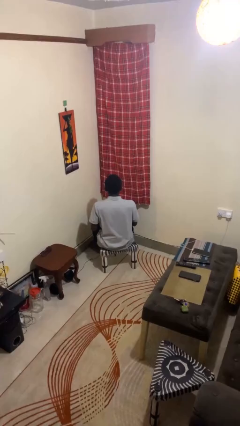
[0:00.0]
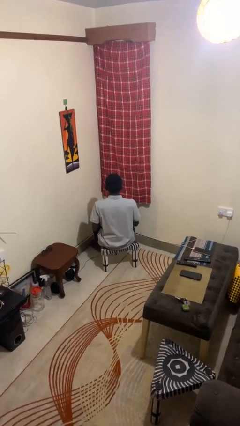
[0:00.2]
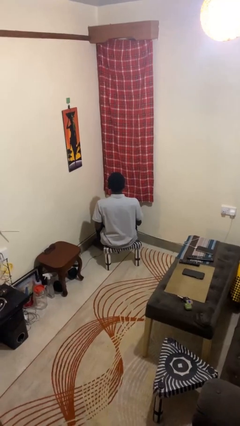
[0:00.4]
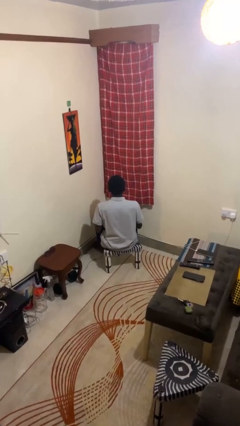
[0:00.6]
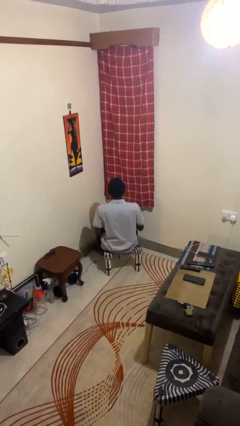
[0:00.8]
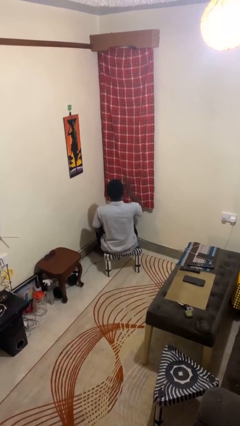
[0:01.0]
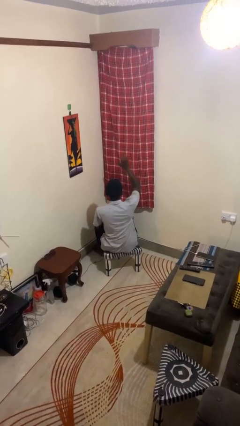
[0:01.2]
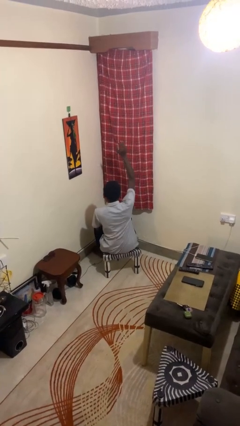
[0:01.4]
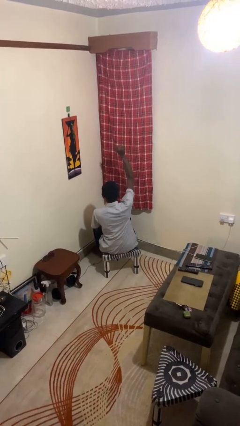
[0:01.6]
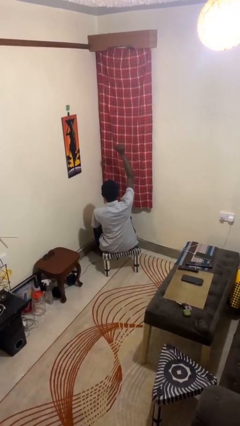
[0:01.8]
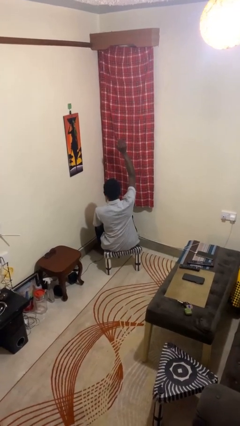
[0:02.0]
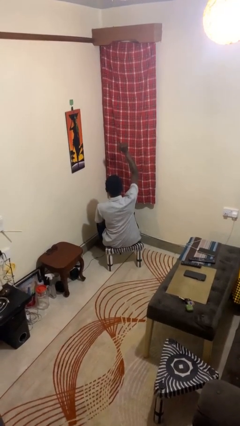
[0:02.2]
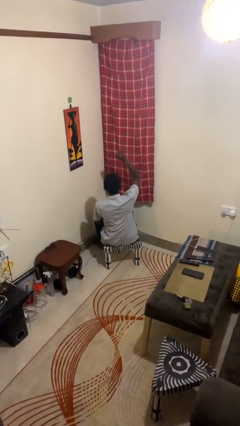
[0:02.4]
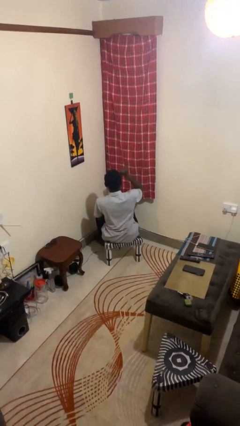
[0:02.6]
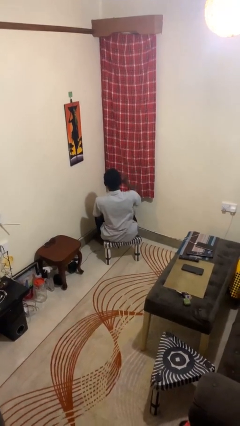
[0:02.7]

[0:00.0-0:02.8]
person gestures come here

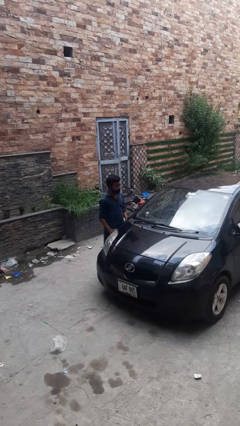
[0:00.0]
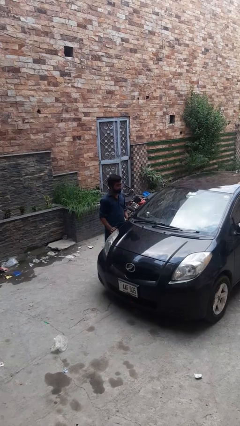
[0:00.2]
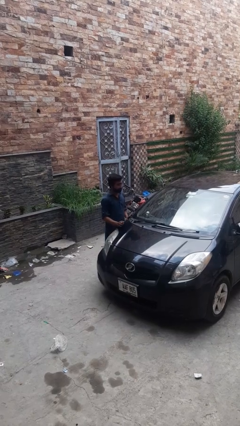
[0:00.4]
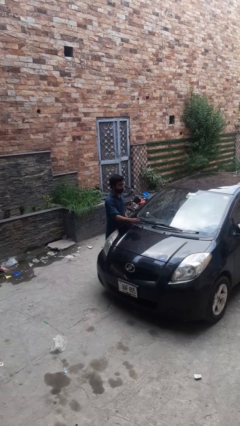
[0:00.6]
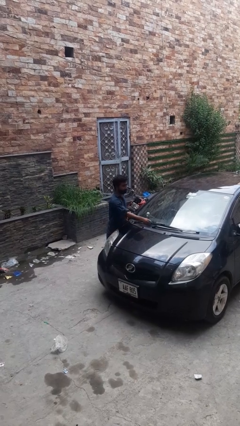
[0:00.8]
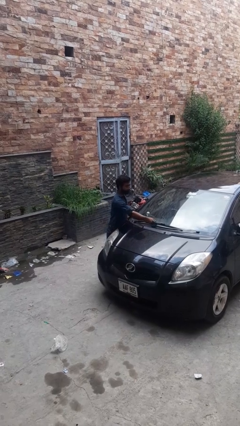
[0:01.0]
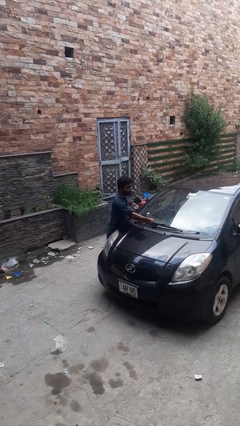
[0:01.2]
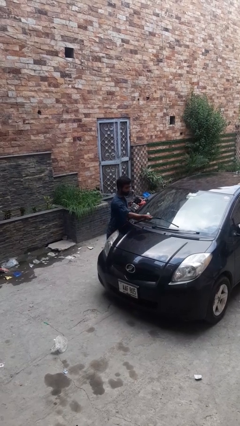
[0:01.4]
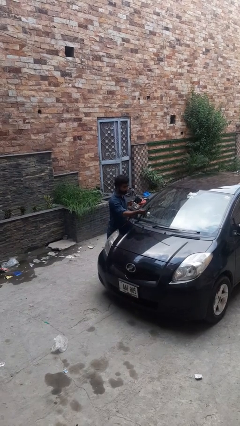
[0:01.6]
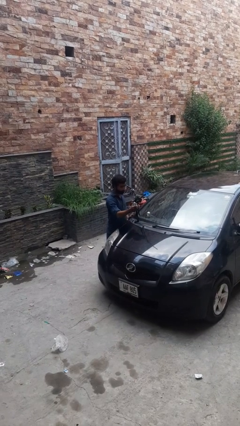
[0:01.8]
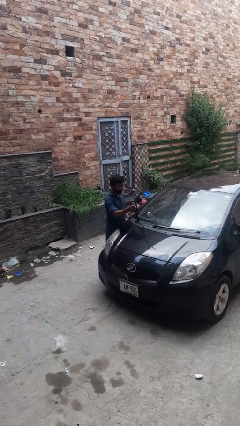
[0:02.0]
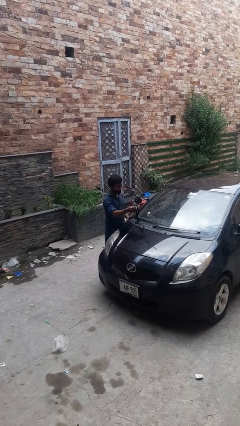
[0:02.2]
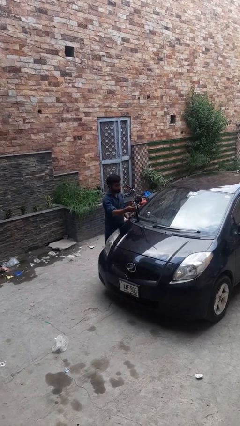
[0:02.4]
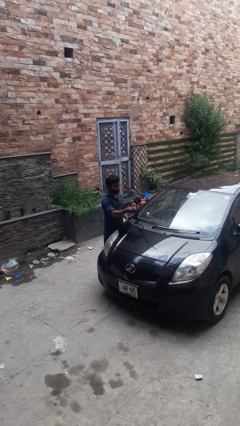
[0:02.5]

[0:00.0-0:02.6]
person flips up car wipers

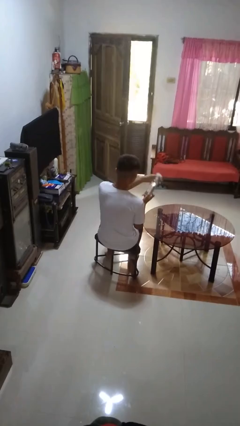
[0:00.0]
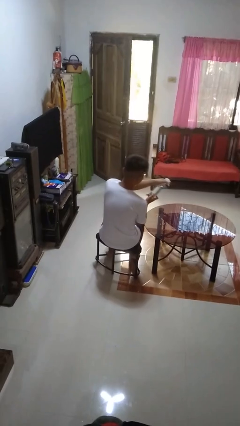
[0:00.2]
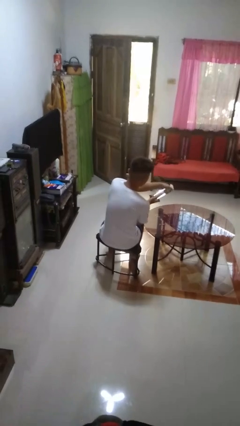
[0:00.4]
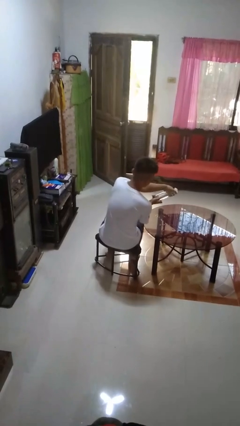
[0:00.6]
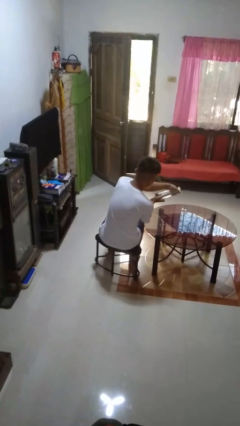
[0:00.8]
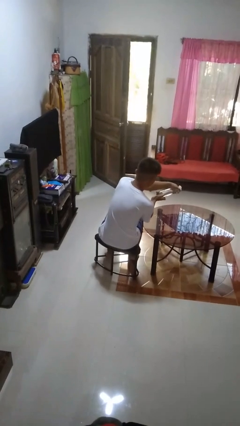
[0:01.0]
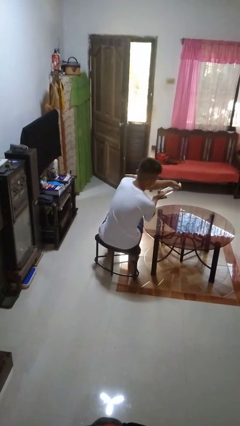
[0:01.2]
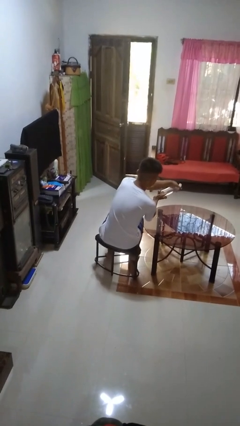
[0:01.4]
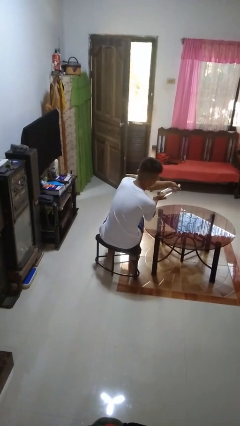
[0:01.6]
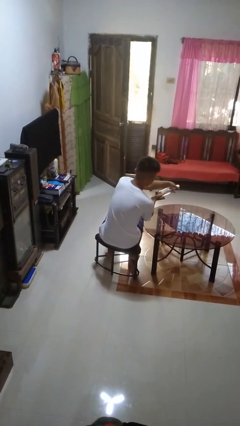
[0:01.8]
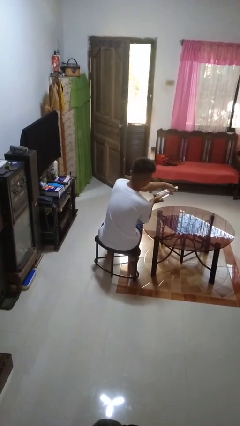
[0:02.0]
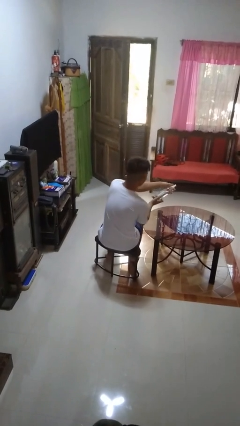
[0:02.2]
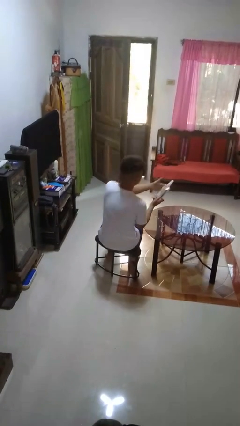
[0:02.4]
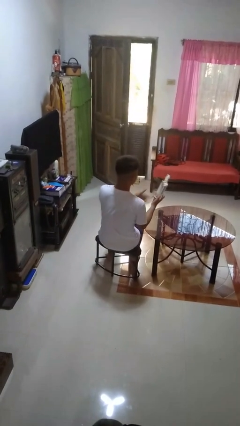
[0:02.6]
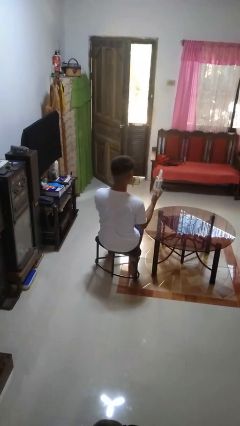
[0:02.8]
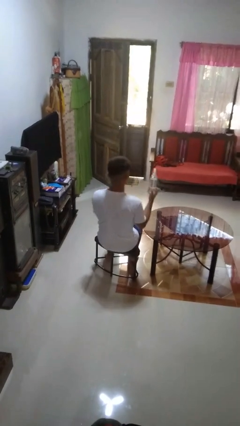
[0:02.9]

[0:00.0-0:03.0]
person sprays from bottle

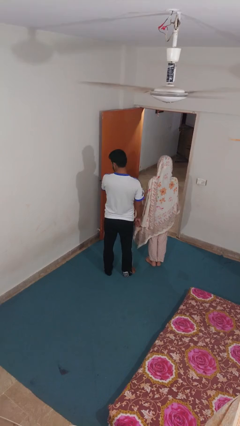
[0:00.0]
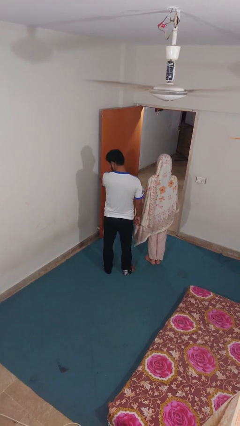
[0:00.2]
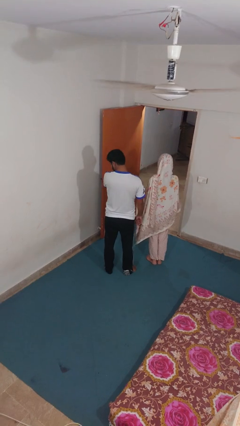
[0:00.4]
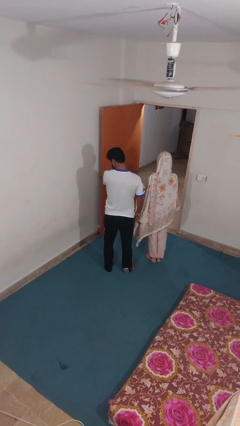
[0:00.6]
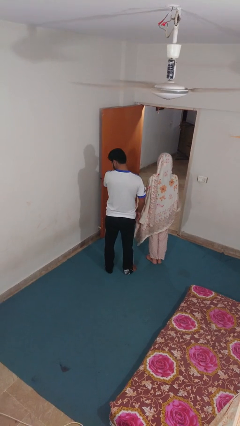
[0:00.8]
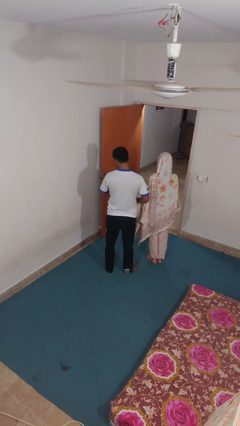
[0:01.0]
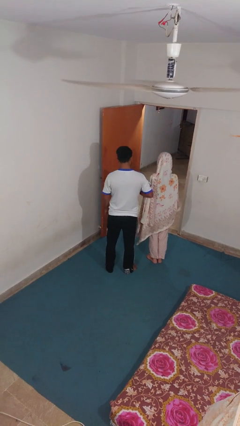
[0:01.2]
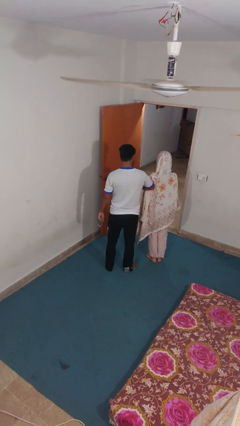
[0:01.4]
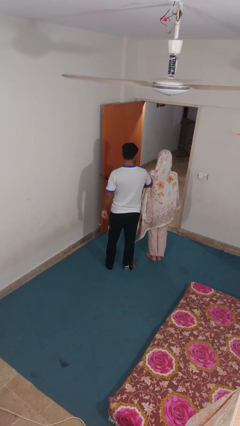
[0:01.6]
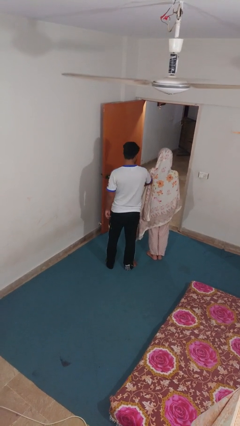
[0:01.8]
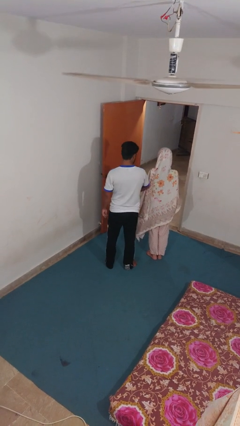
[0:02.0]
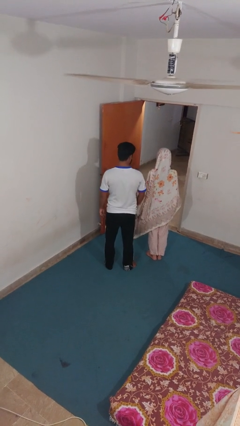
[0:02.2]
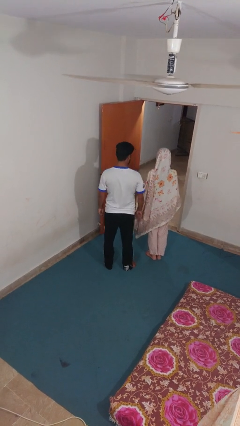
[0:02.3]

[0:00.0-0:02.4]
person nudges person with elbow

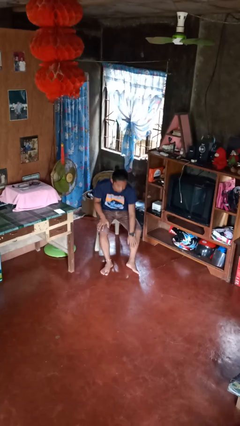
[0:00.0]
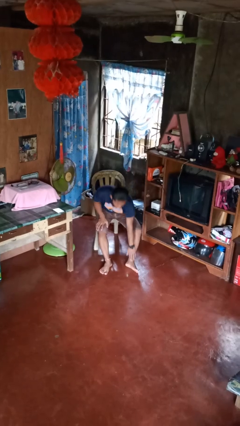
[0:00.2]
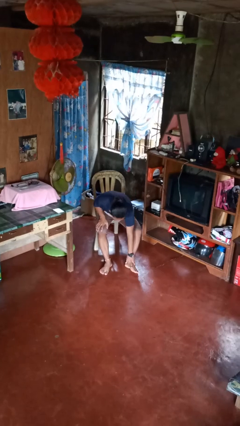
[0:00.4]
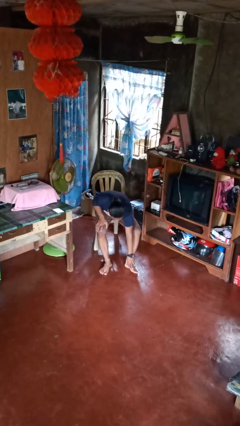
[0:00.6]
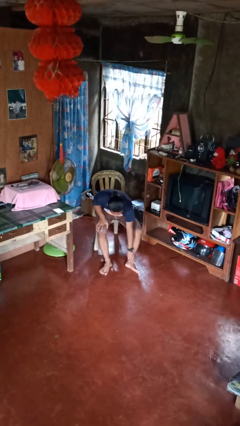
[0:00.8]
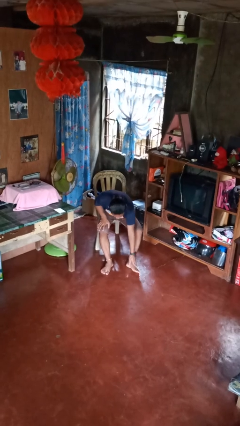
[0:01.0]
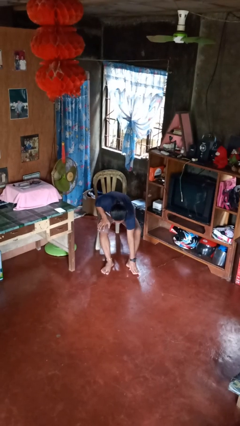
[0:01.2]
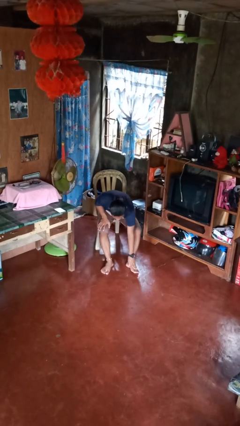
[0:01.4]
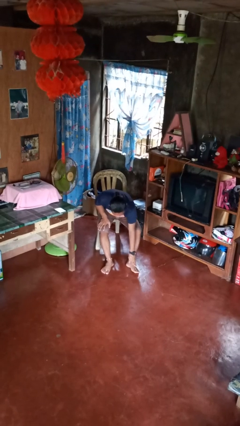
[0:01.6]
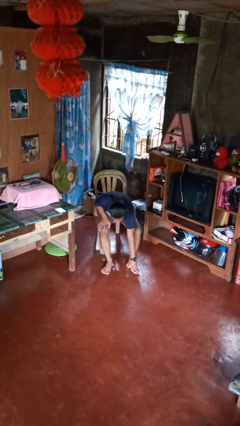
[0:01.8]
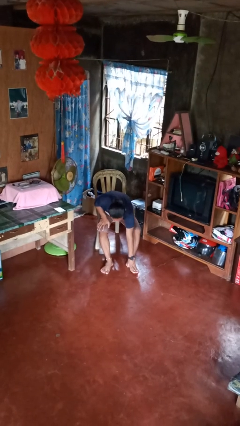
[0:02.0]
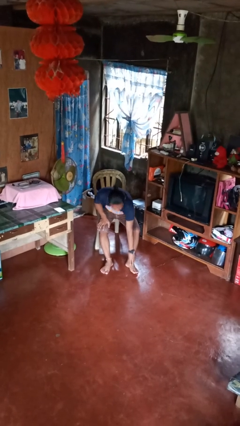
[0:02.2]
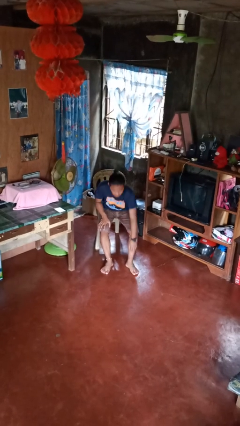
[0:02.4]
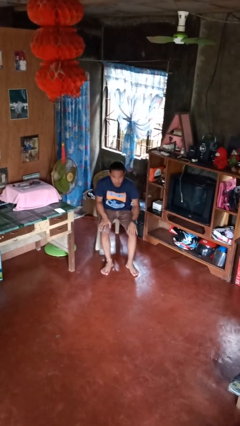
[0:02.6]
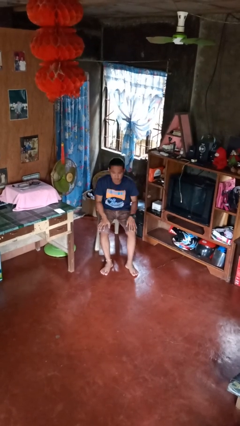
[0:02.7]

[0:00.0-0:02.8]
person rubs foot

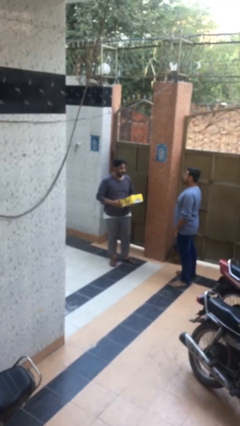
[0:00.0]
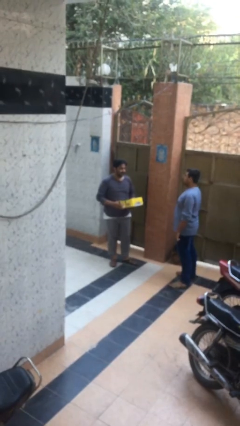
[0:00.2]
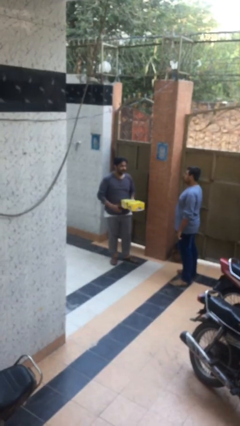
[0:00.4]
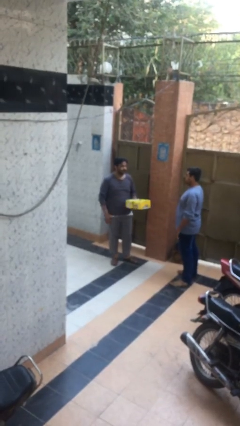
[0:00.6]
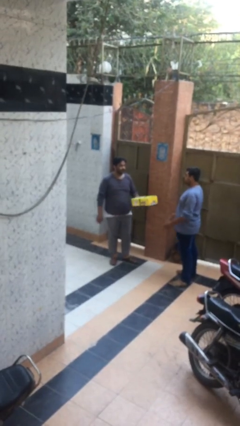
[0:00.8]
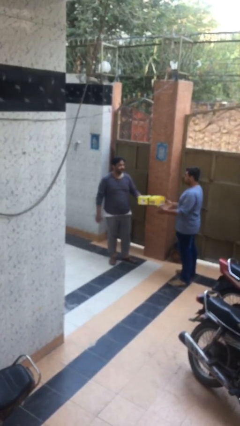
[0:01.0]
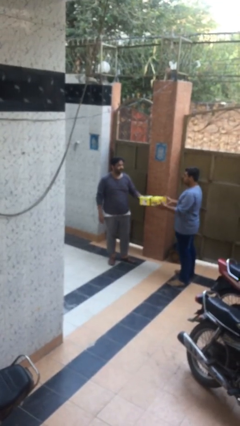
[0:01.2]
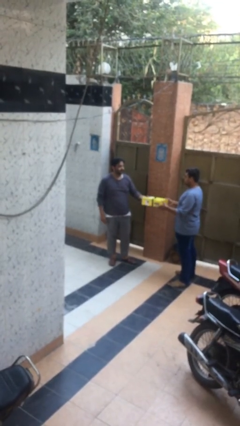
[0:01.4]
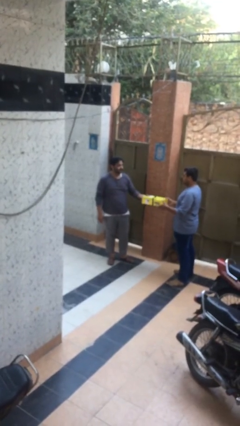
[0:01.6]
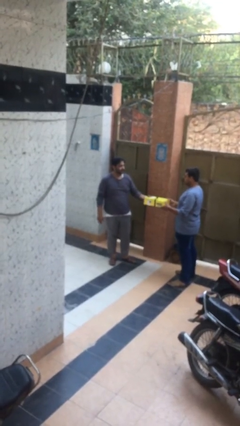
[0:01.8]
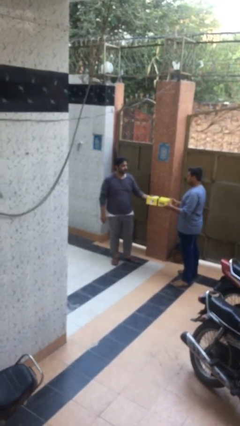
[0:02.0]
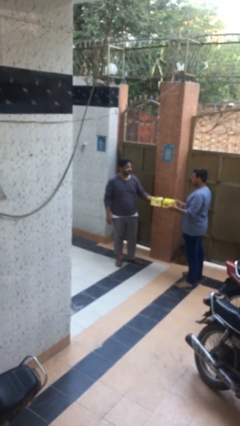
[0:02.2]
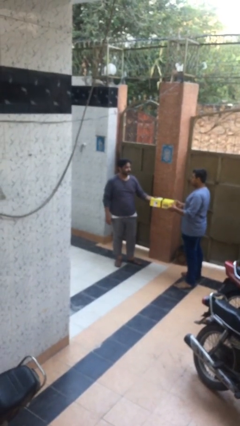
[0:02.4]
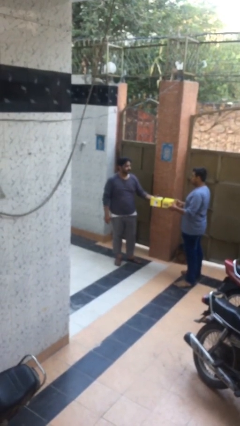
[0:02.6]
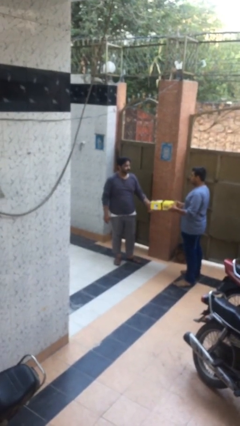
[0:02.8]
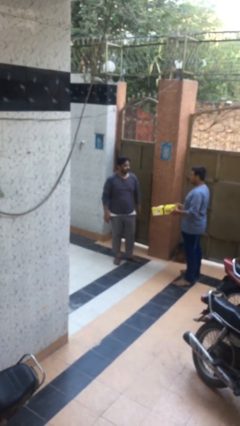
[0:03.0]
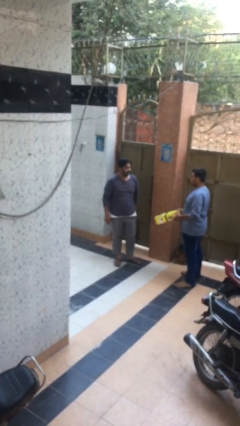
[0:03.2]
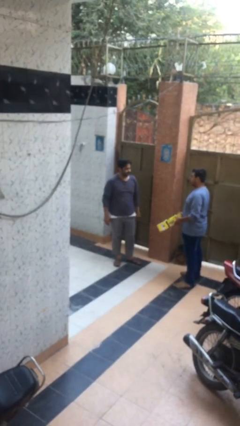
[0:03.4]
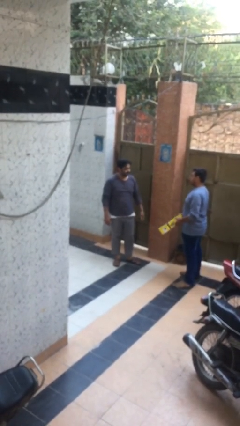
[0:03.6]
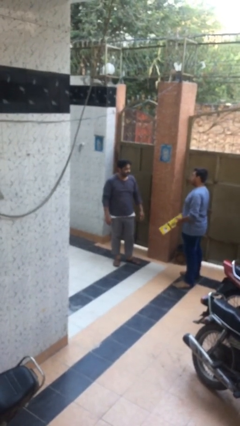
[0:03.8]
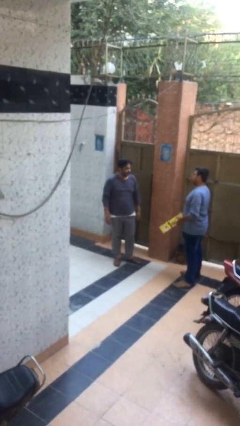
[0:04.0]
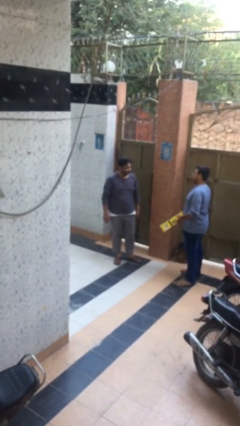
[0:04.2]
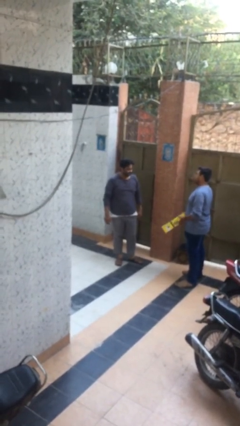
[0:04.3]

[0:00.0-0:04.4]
person transfers object to person
